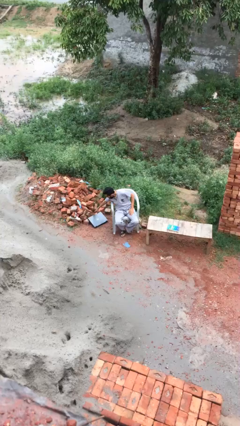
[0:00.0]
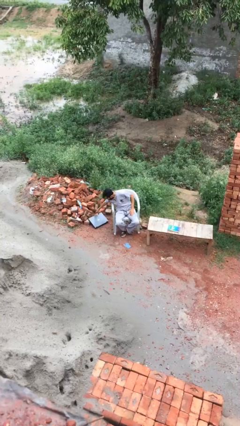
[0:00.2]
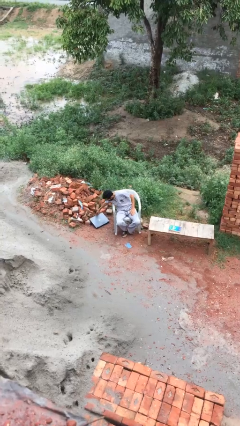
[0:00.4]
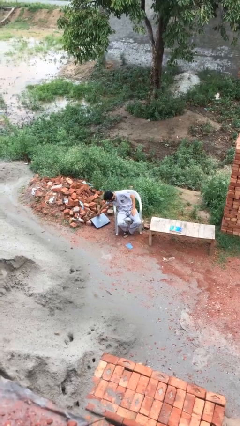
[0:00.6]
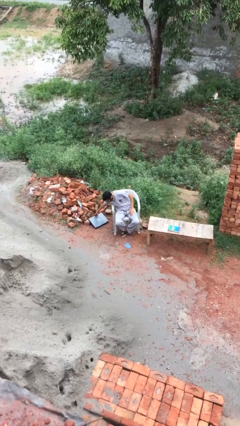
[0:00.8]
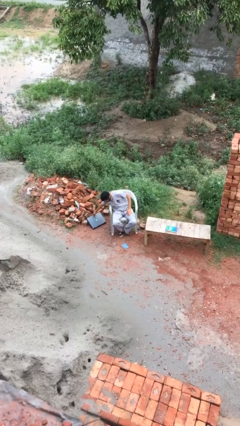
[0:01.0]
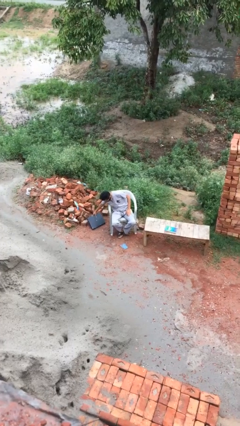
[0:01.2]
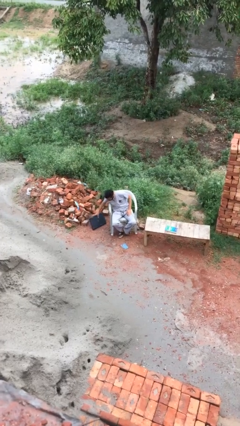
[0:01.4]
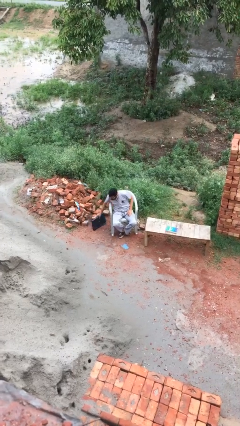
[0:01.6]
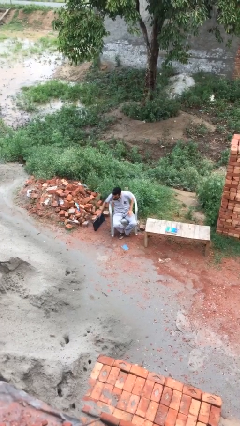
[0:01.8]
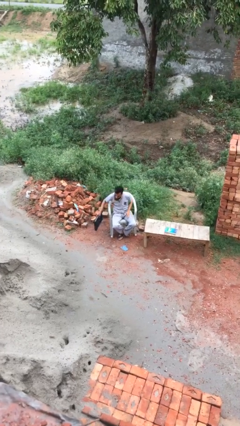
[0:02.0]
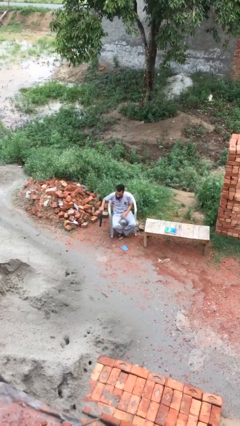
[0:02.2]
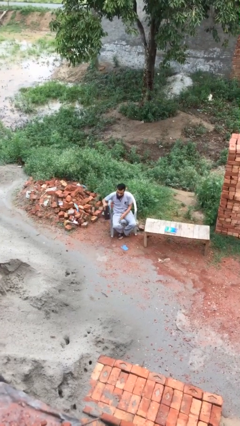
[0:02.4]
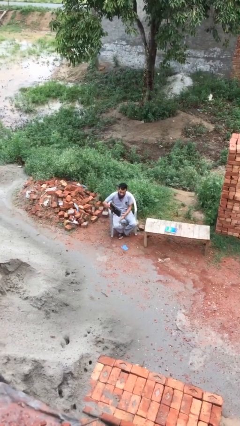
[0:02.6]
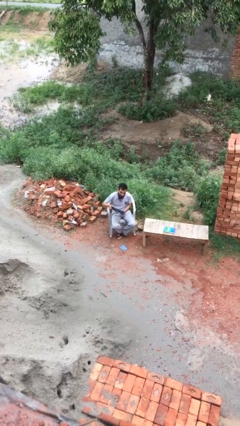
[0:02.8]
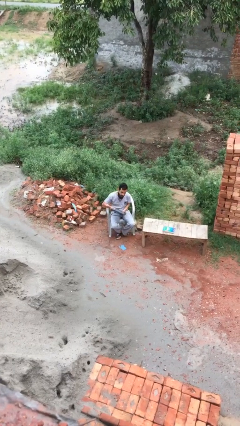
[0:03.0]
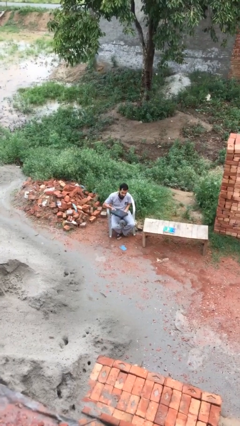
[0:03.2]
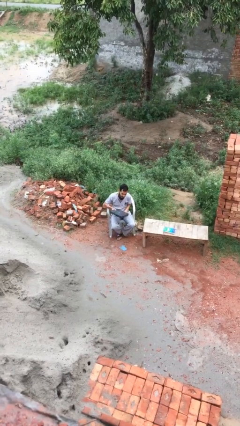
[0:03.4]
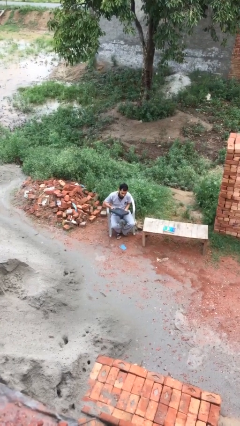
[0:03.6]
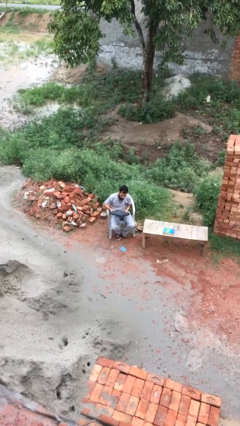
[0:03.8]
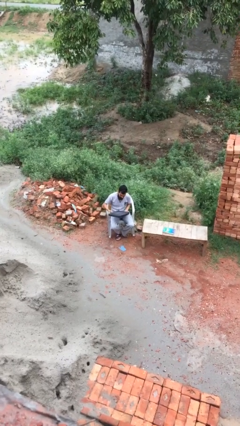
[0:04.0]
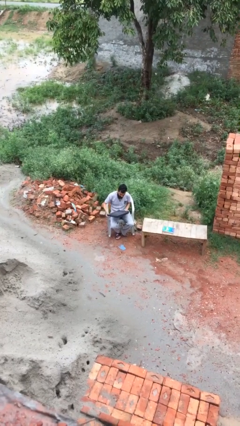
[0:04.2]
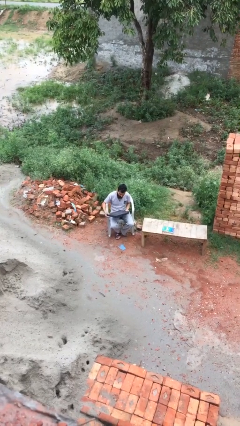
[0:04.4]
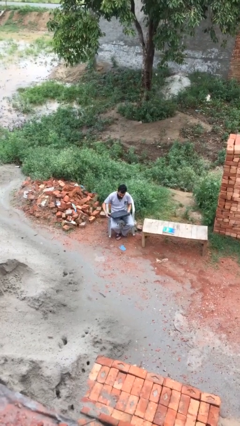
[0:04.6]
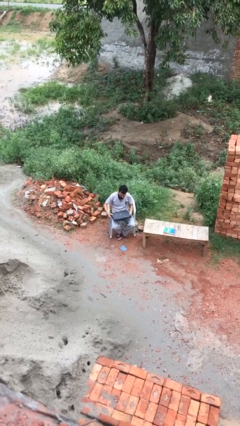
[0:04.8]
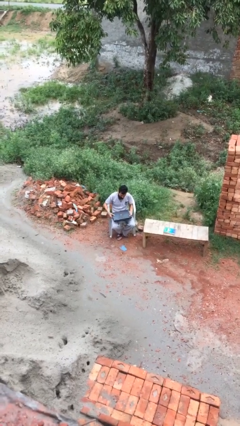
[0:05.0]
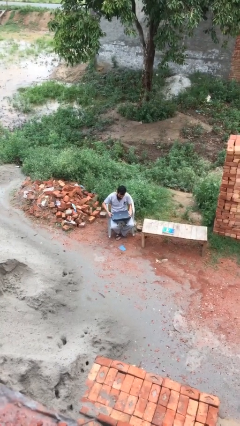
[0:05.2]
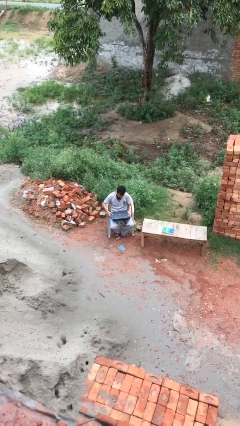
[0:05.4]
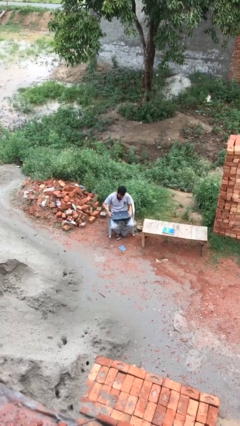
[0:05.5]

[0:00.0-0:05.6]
person picks up object from floor

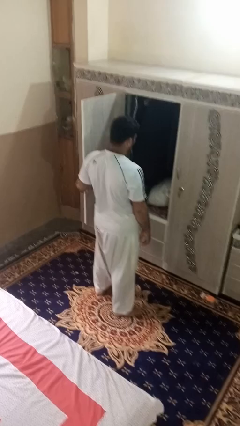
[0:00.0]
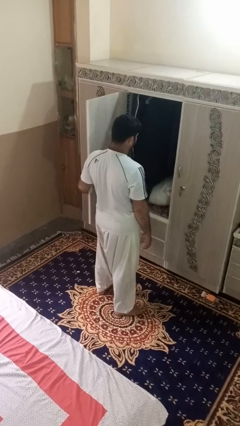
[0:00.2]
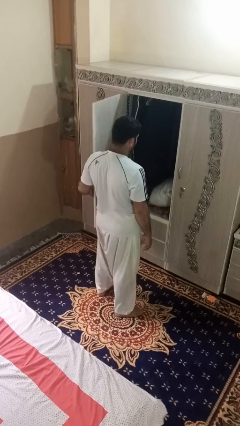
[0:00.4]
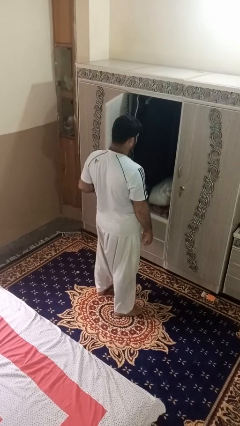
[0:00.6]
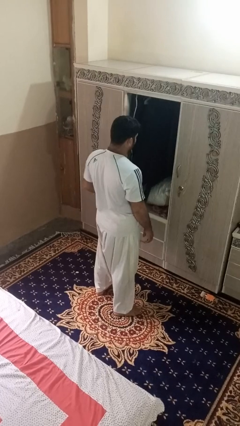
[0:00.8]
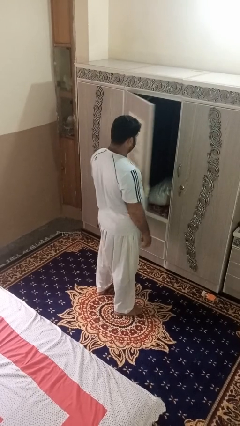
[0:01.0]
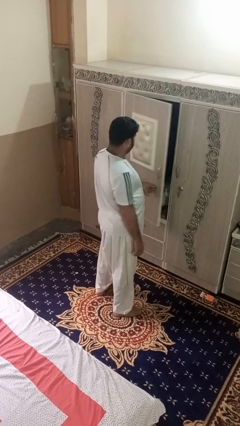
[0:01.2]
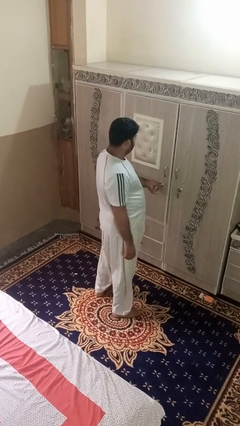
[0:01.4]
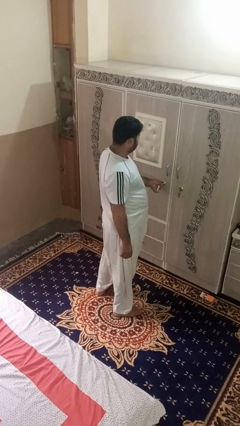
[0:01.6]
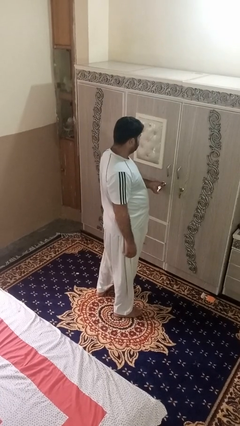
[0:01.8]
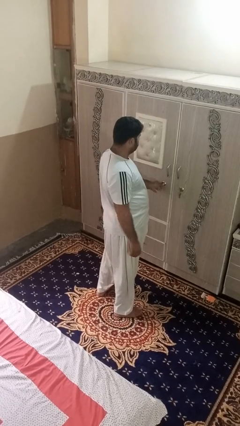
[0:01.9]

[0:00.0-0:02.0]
person closes dresser drawer

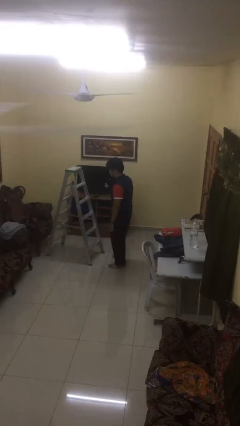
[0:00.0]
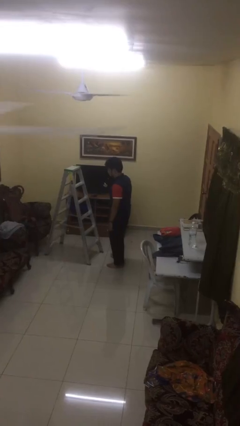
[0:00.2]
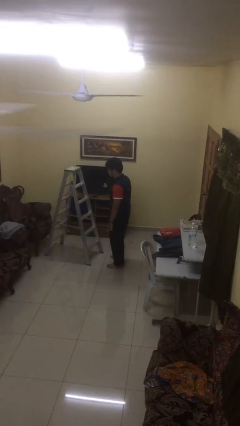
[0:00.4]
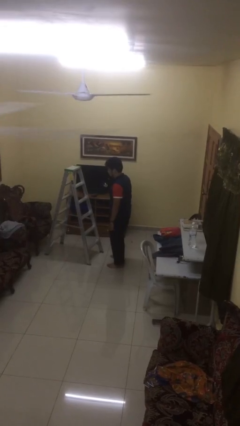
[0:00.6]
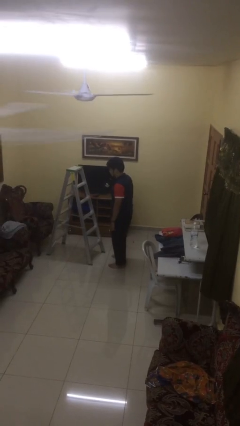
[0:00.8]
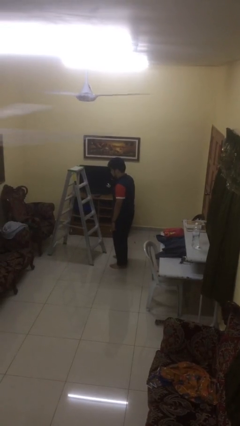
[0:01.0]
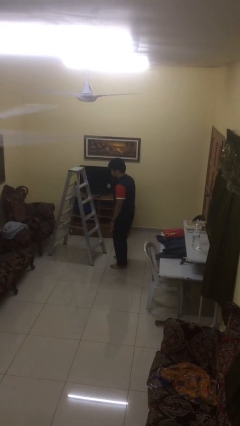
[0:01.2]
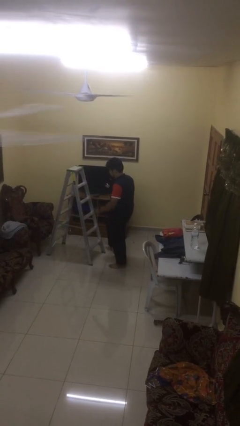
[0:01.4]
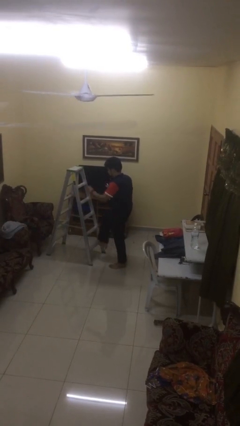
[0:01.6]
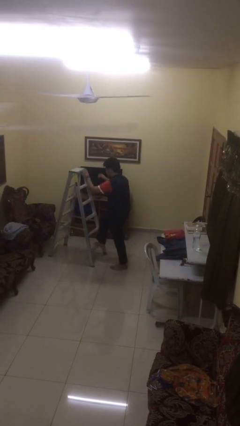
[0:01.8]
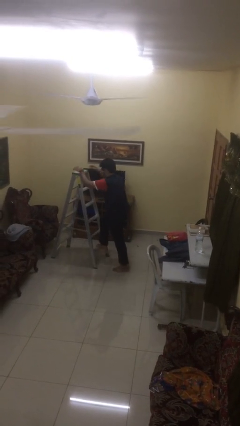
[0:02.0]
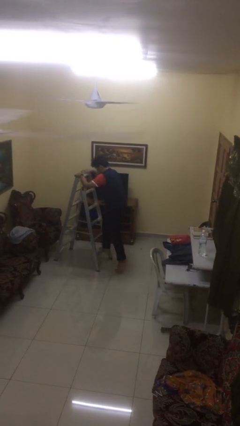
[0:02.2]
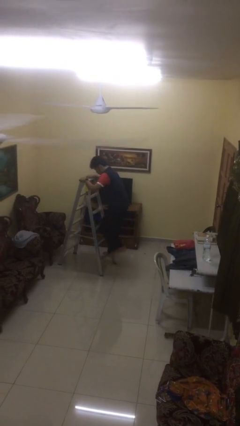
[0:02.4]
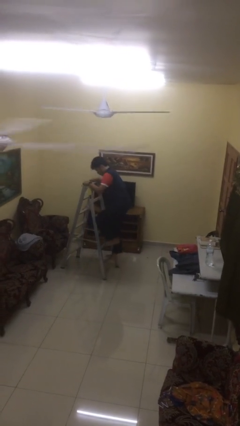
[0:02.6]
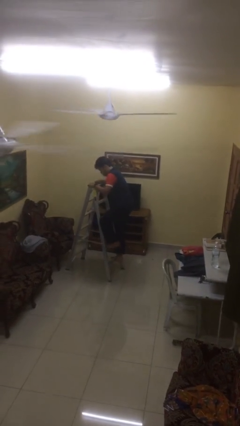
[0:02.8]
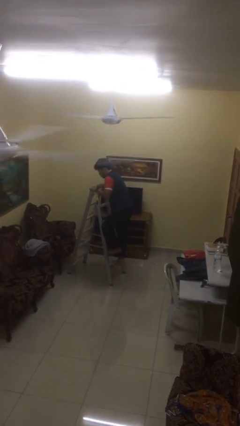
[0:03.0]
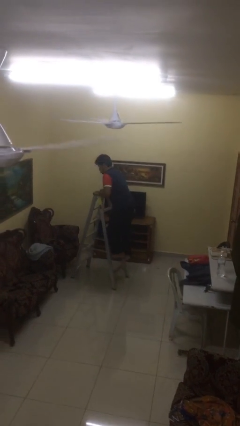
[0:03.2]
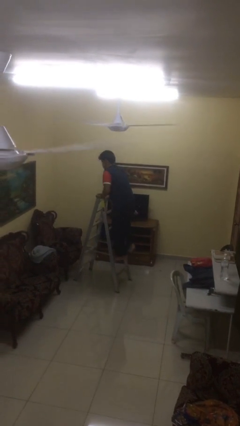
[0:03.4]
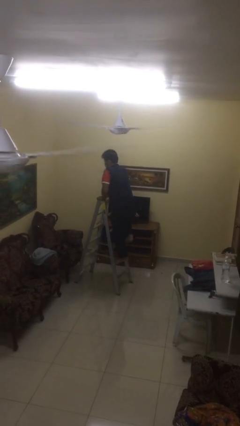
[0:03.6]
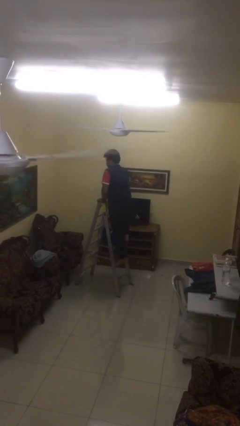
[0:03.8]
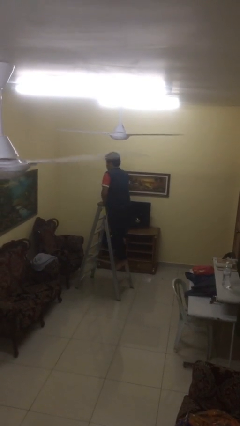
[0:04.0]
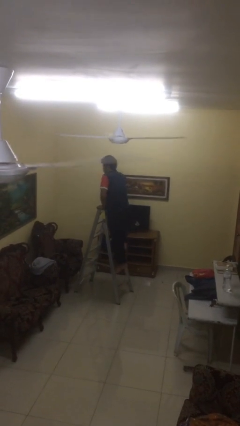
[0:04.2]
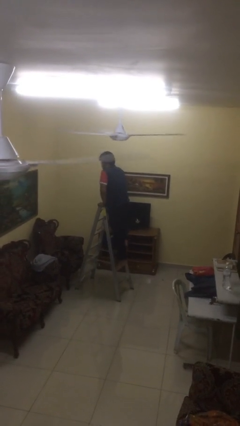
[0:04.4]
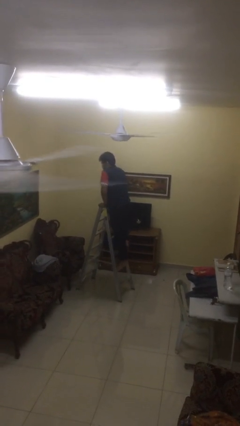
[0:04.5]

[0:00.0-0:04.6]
person climbs up ladder

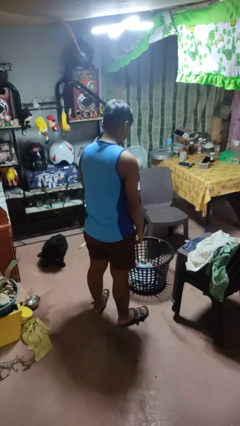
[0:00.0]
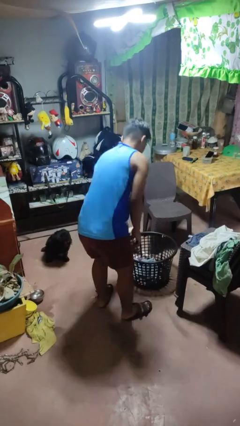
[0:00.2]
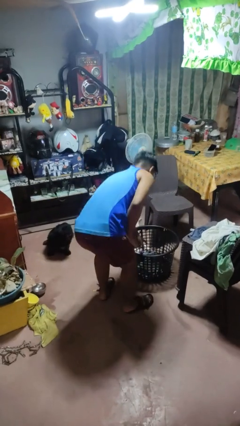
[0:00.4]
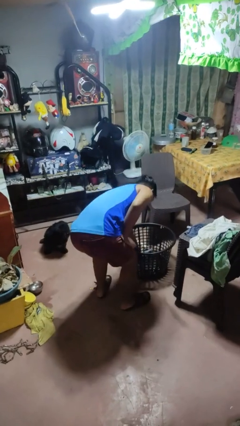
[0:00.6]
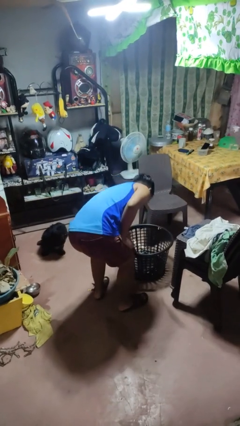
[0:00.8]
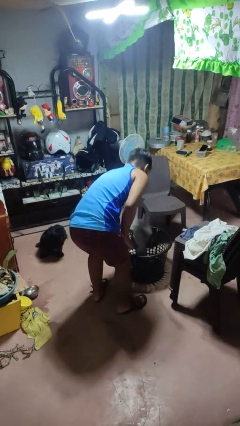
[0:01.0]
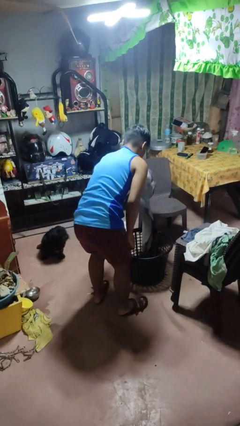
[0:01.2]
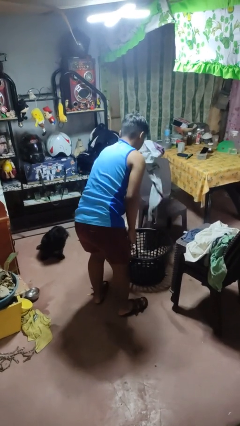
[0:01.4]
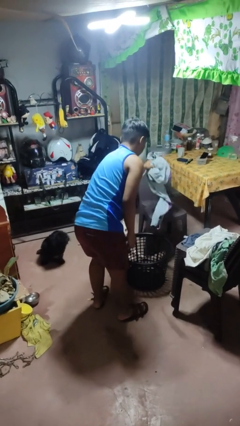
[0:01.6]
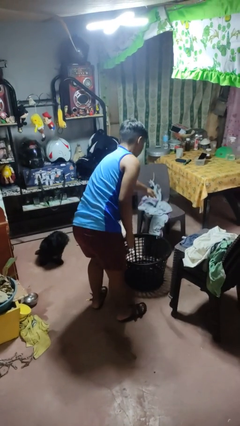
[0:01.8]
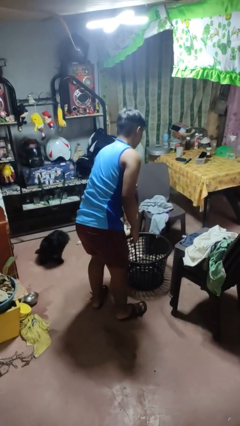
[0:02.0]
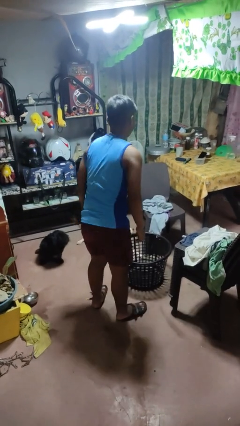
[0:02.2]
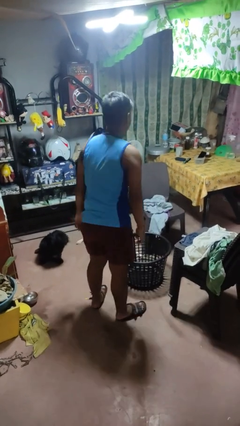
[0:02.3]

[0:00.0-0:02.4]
person takes object from basket

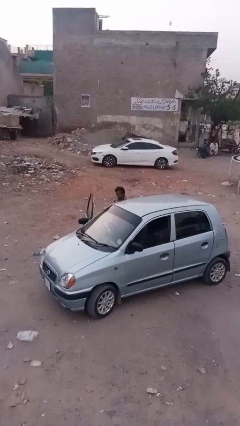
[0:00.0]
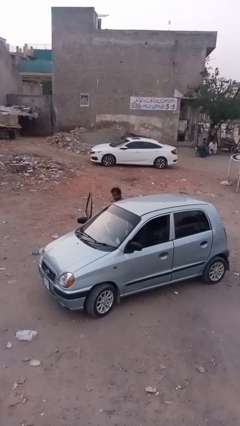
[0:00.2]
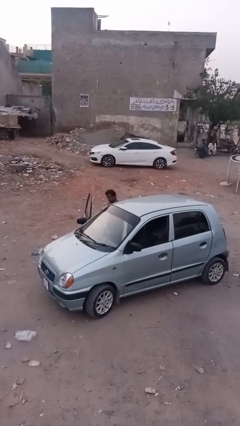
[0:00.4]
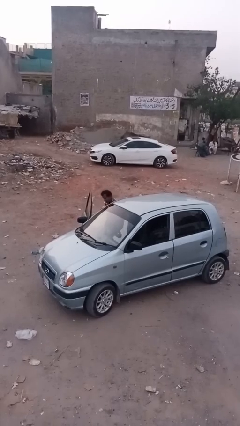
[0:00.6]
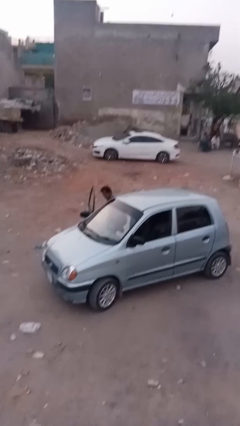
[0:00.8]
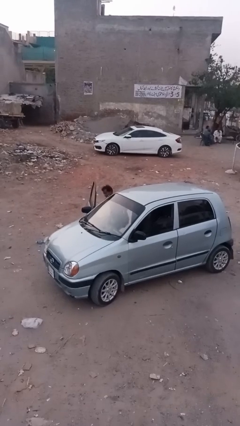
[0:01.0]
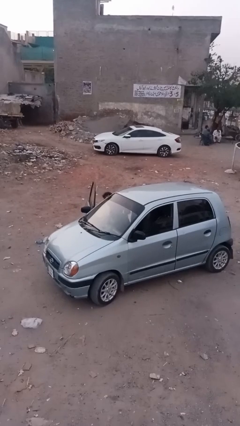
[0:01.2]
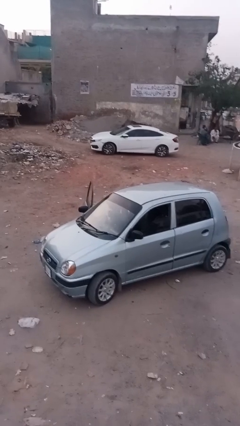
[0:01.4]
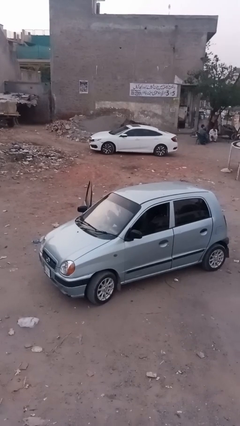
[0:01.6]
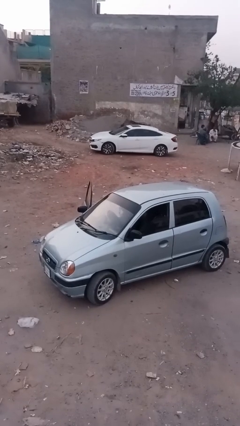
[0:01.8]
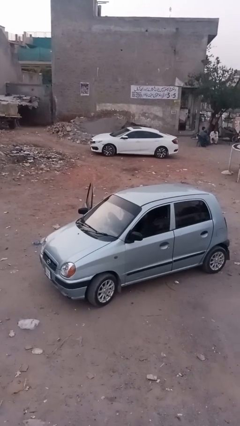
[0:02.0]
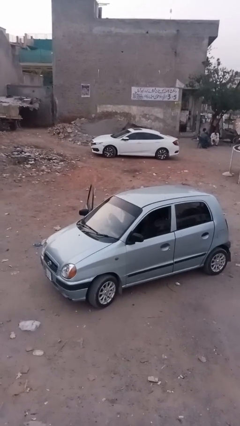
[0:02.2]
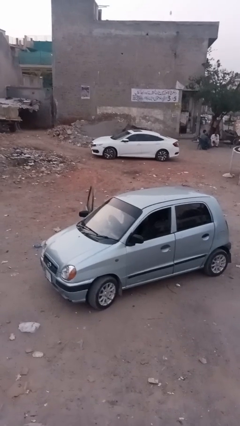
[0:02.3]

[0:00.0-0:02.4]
person enters car

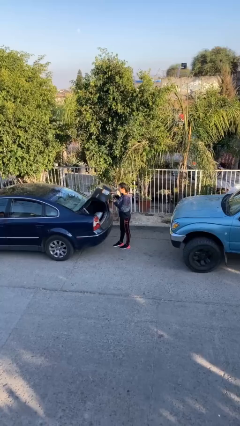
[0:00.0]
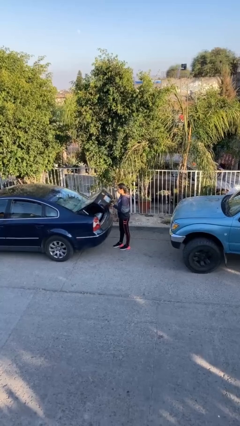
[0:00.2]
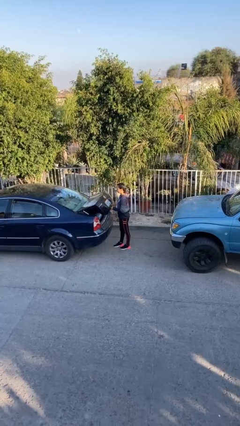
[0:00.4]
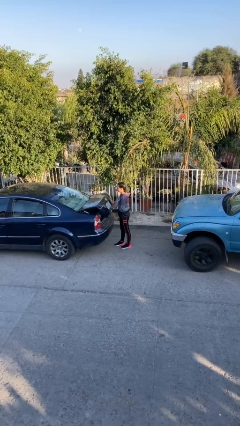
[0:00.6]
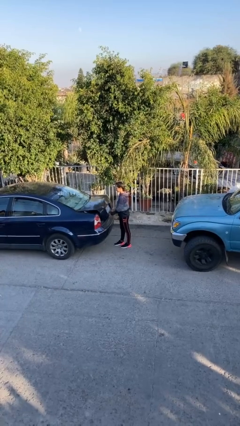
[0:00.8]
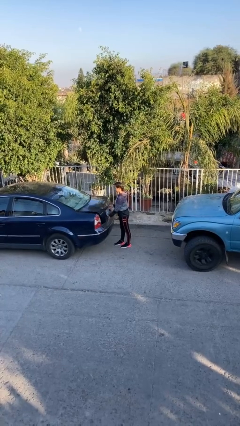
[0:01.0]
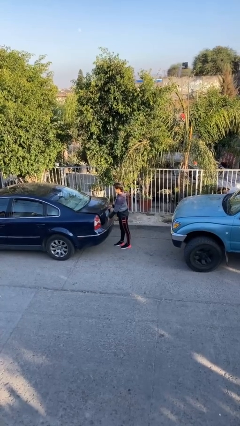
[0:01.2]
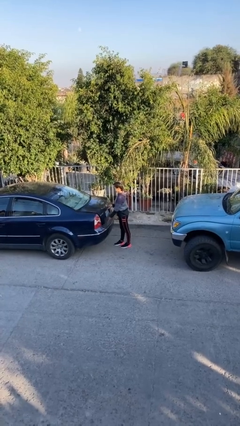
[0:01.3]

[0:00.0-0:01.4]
person closes car trunk
